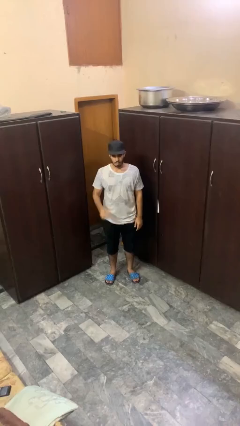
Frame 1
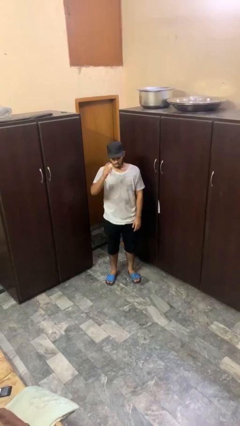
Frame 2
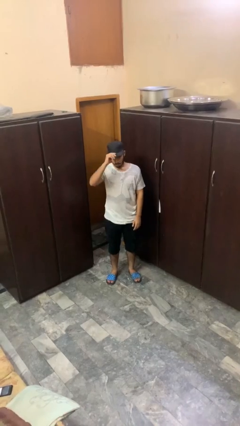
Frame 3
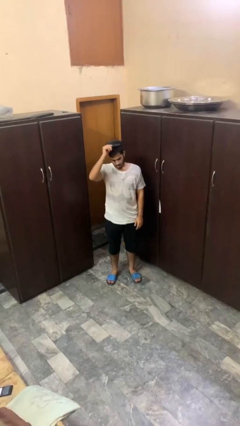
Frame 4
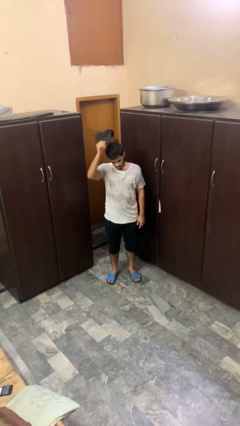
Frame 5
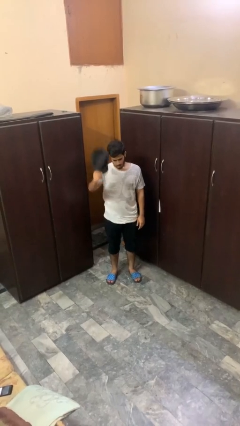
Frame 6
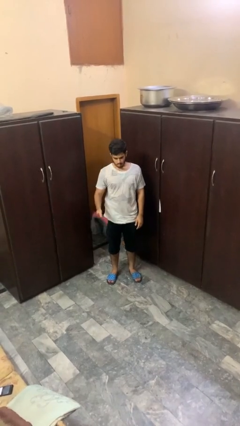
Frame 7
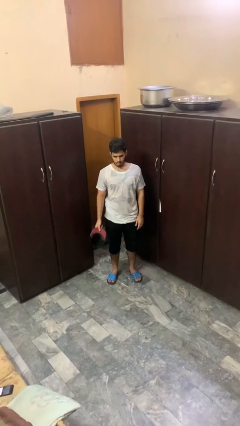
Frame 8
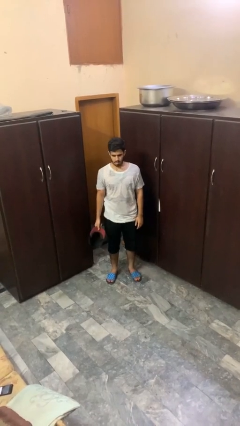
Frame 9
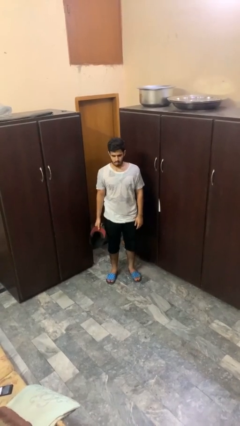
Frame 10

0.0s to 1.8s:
person takes off hat

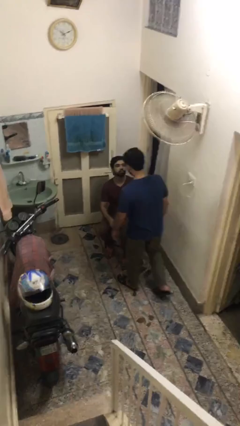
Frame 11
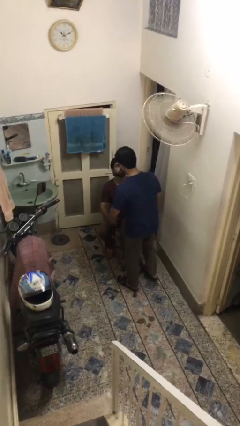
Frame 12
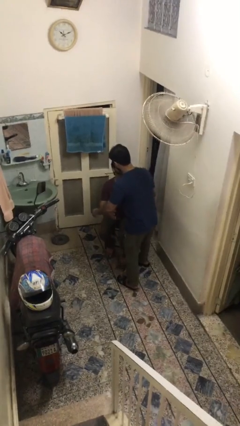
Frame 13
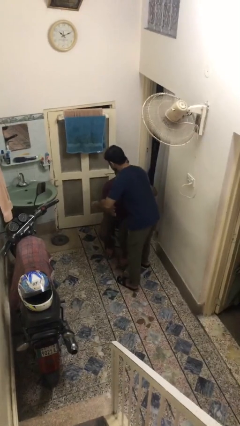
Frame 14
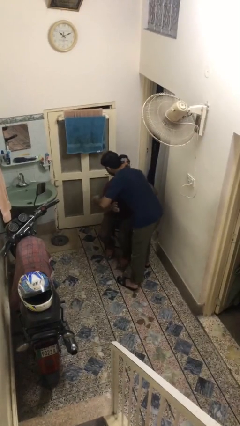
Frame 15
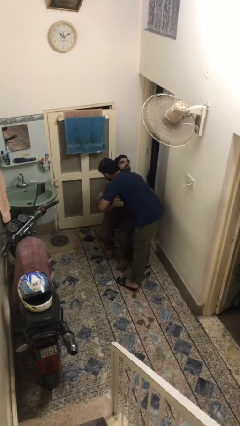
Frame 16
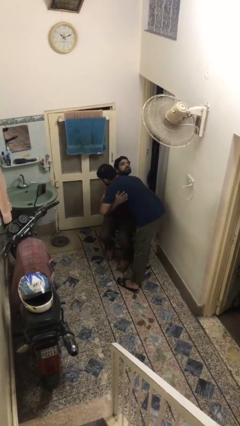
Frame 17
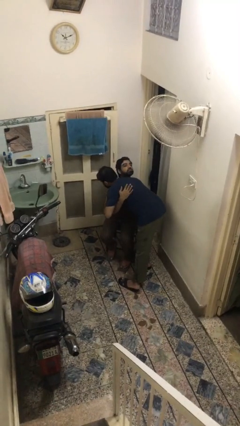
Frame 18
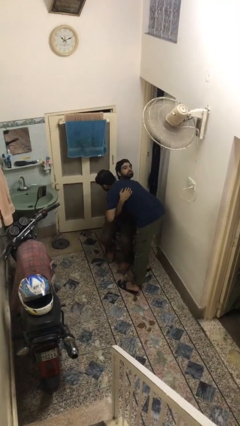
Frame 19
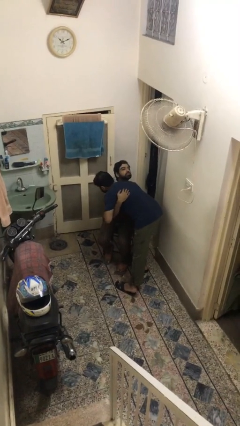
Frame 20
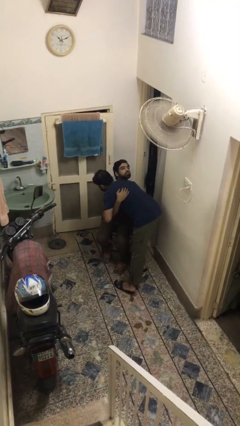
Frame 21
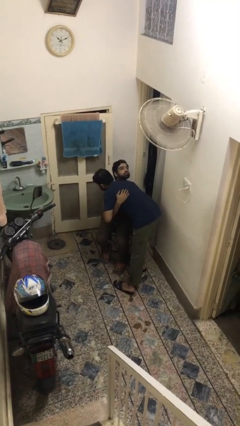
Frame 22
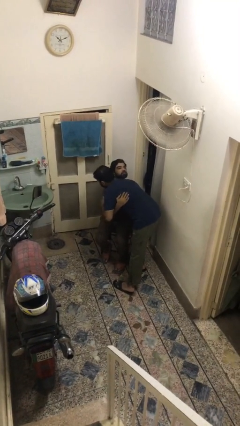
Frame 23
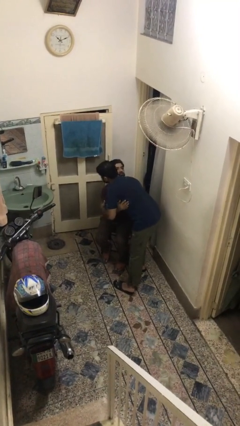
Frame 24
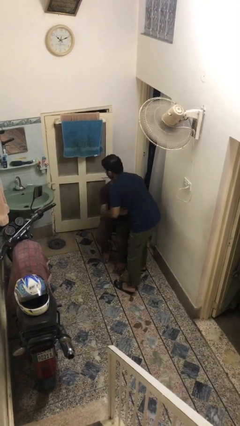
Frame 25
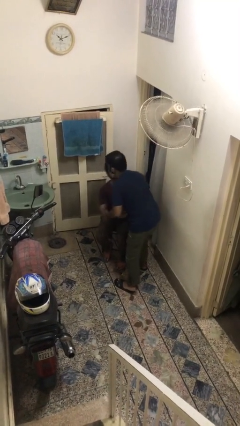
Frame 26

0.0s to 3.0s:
person embraces person

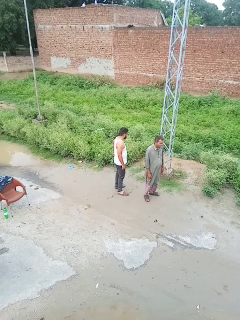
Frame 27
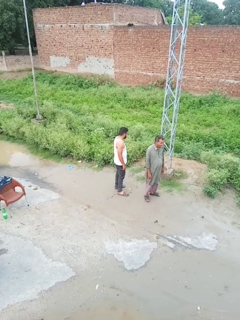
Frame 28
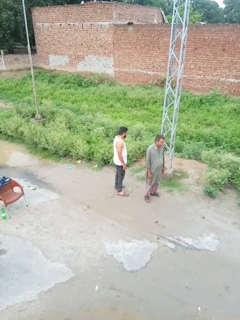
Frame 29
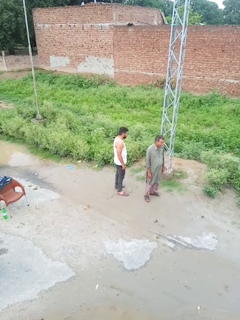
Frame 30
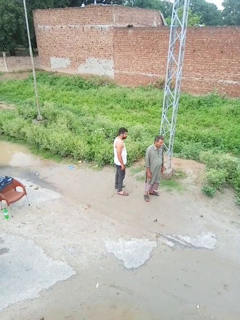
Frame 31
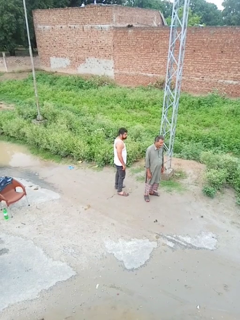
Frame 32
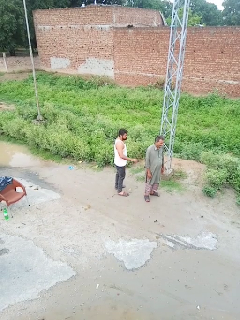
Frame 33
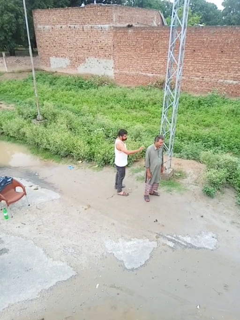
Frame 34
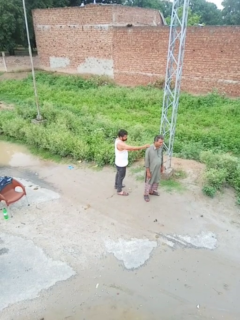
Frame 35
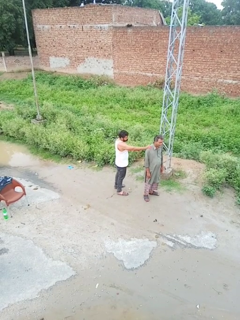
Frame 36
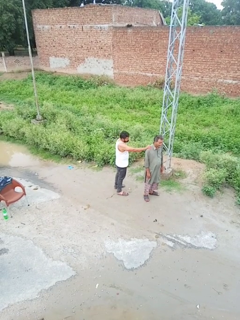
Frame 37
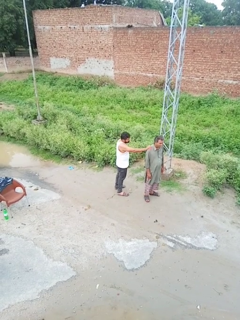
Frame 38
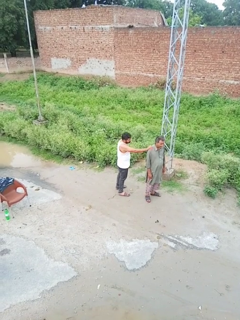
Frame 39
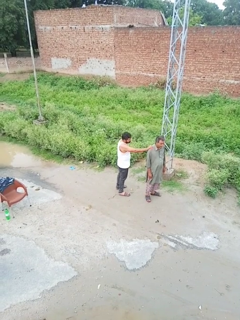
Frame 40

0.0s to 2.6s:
person grabs person by shoulder

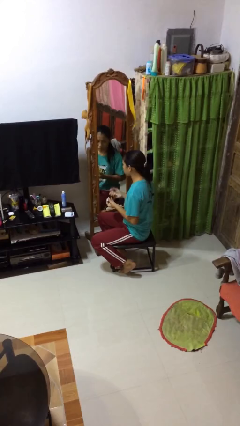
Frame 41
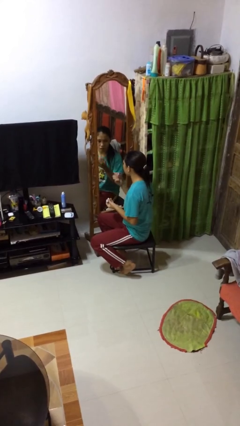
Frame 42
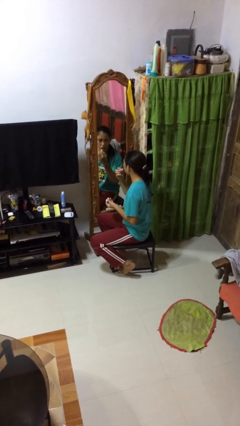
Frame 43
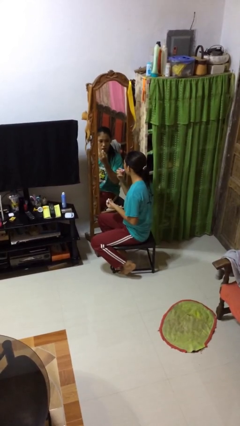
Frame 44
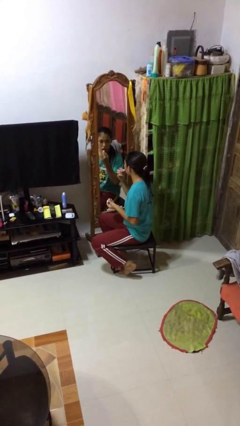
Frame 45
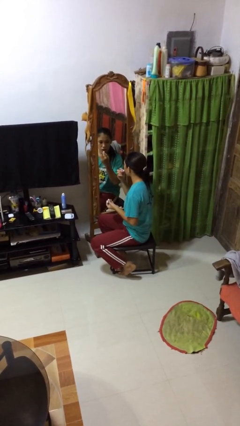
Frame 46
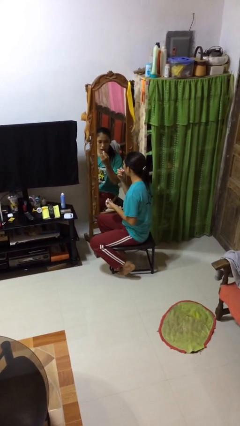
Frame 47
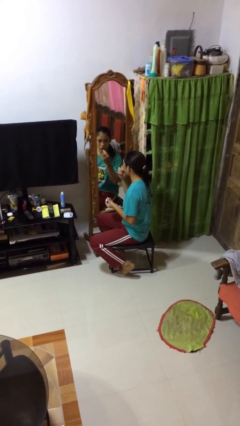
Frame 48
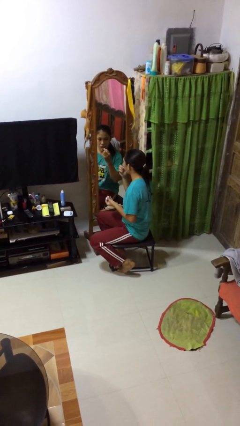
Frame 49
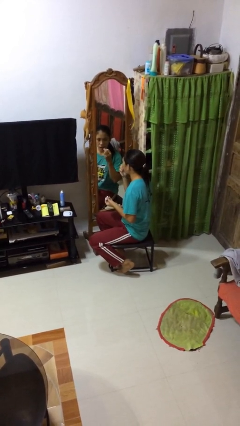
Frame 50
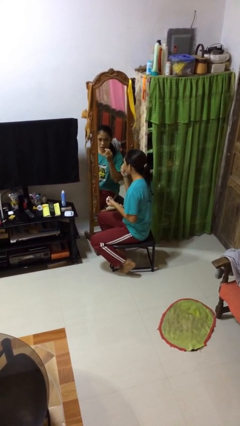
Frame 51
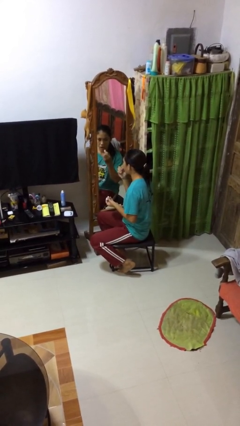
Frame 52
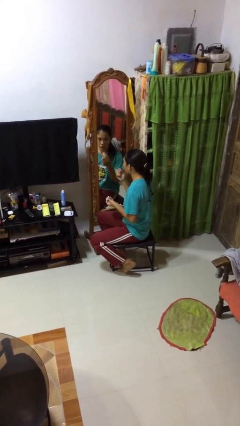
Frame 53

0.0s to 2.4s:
person applies lip makeup

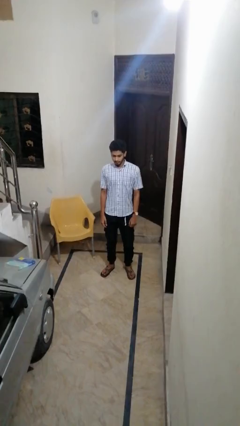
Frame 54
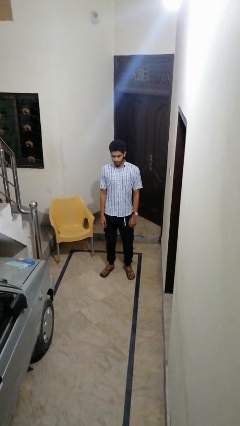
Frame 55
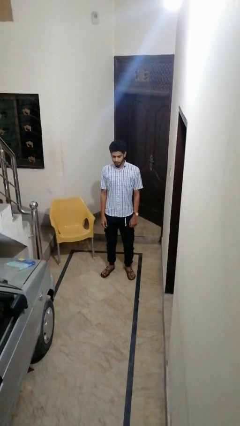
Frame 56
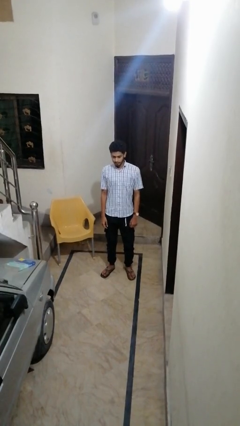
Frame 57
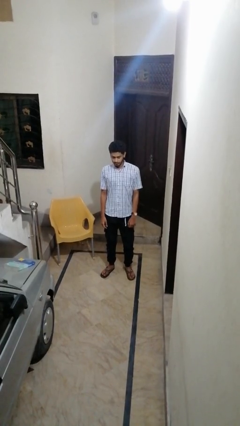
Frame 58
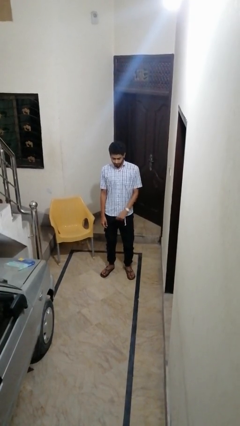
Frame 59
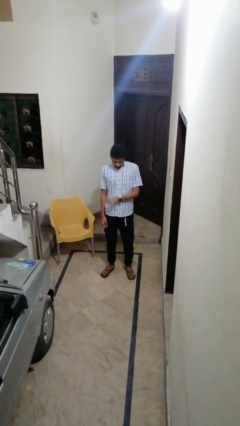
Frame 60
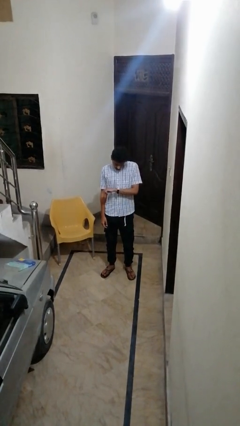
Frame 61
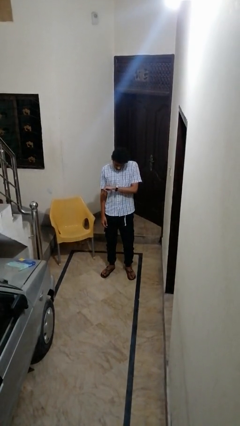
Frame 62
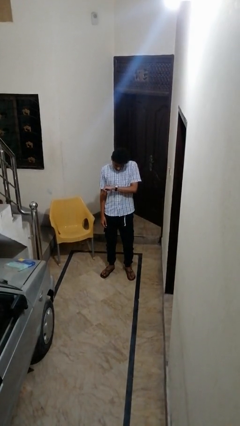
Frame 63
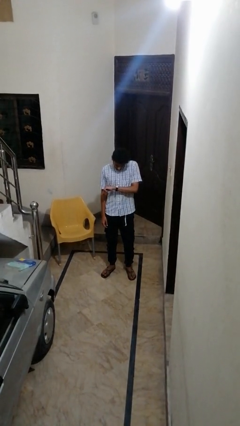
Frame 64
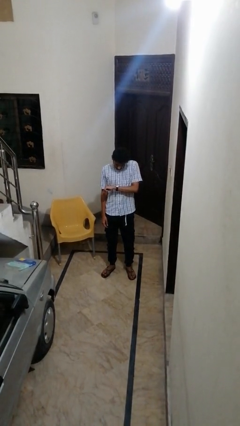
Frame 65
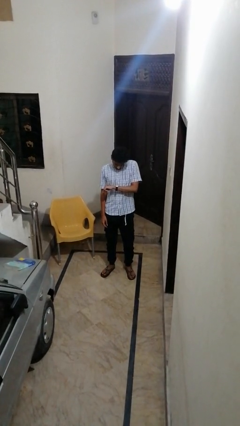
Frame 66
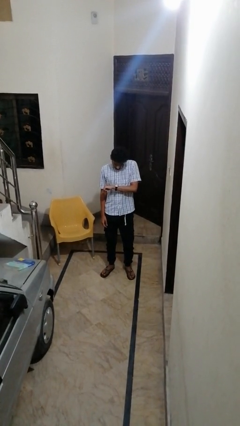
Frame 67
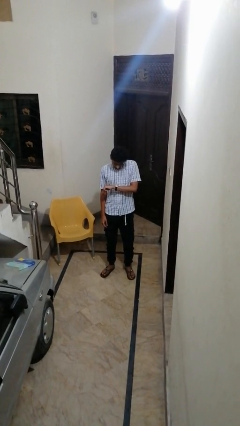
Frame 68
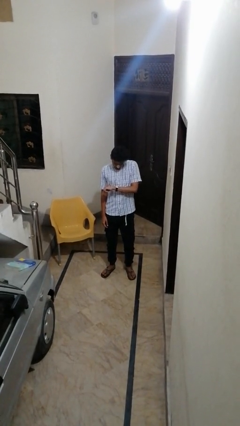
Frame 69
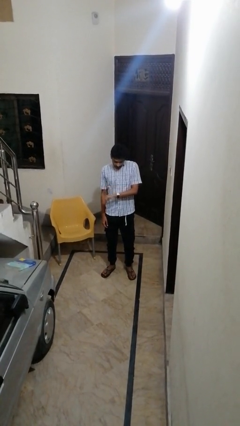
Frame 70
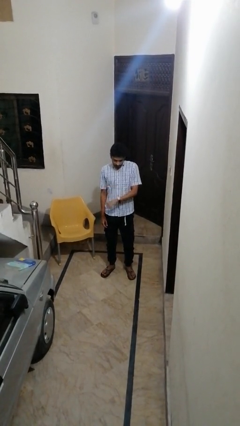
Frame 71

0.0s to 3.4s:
person looks at wristwatch

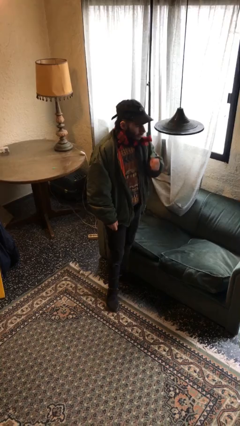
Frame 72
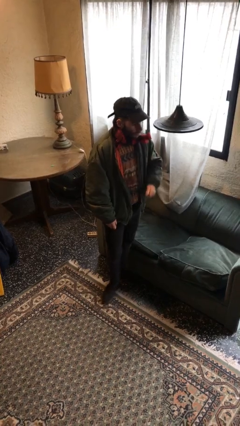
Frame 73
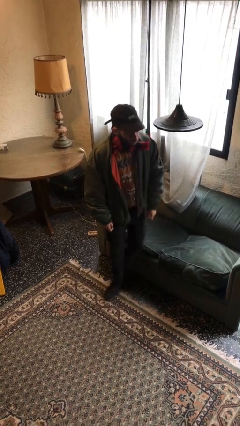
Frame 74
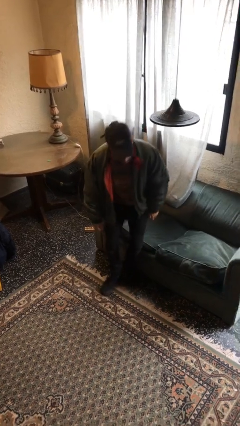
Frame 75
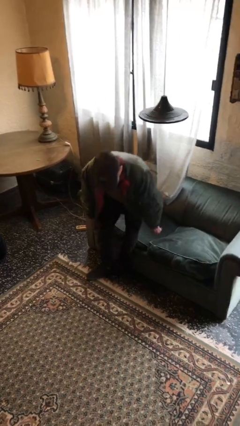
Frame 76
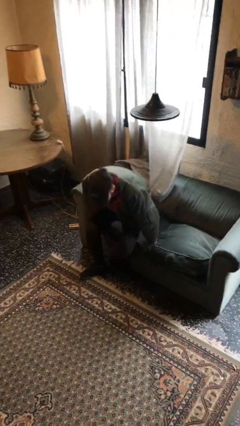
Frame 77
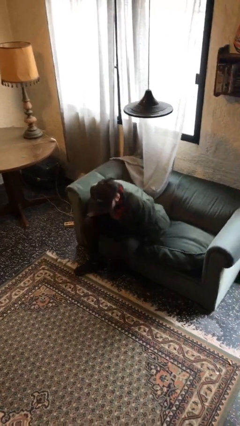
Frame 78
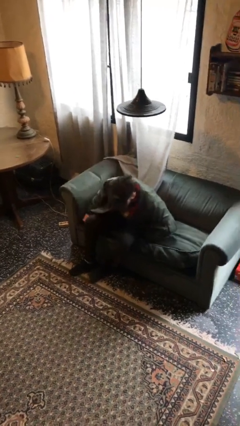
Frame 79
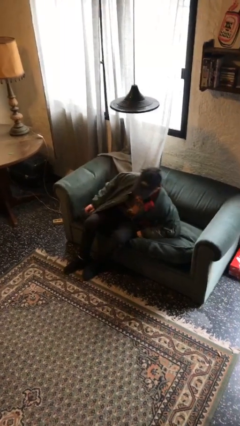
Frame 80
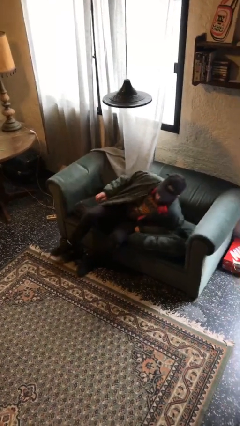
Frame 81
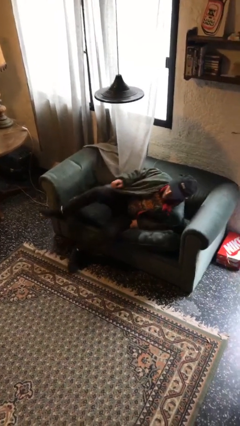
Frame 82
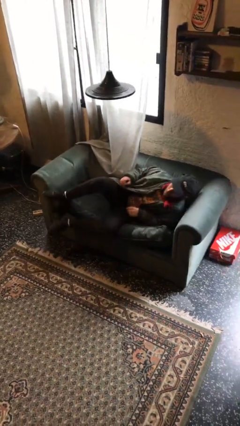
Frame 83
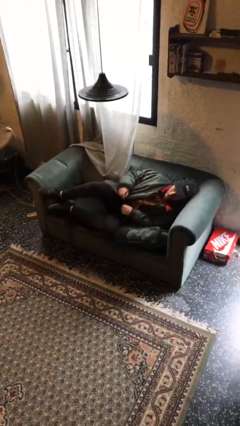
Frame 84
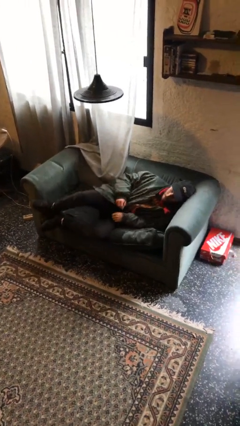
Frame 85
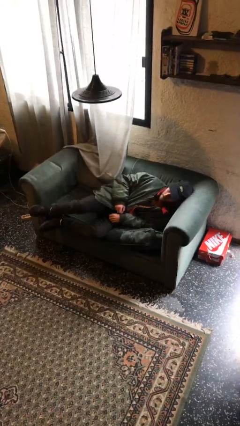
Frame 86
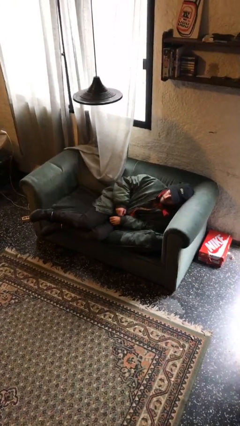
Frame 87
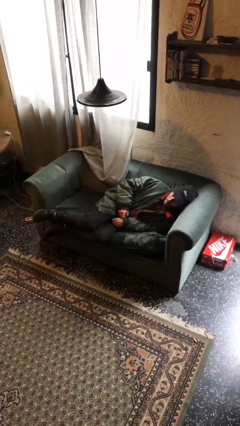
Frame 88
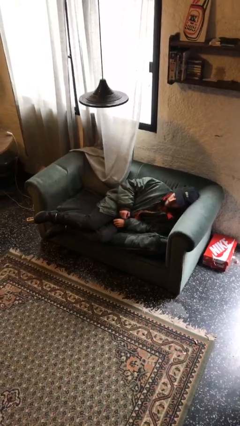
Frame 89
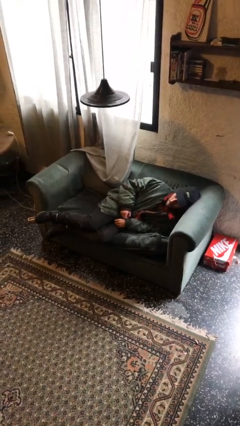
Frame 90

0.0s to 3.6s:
person lies down on couch

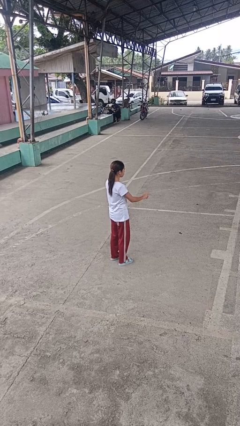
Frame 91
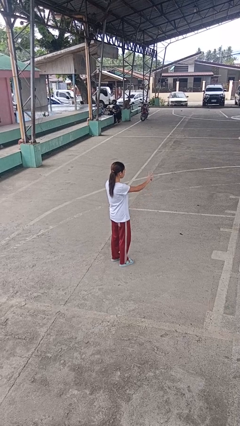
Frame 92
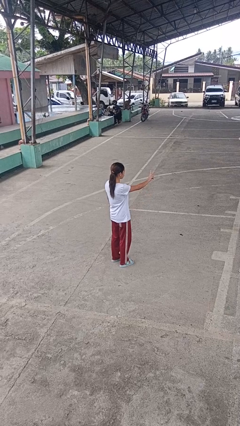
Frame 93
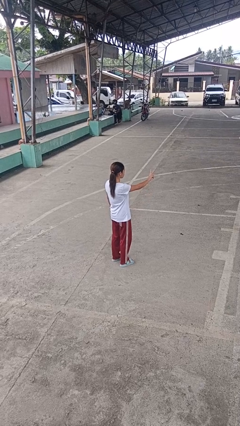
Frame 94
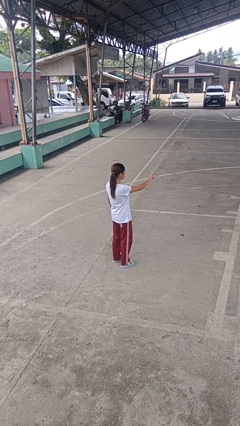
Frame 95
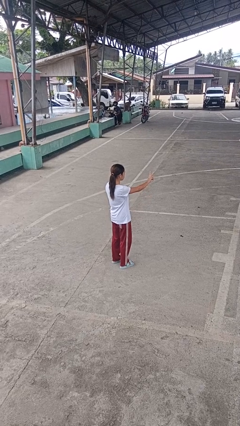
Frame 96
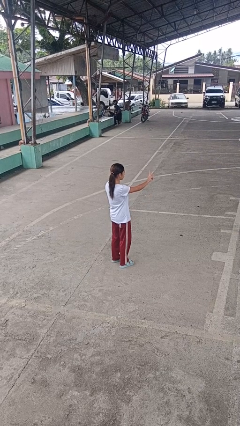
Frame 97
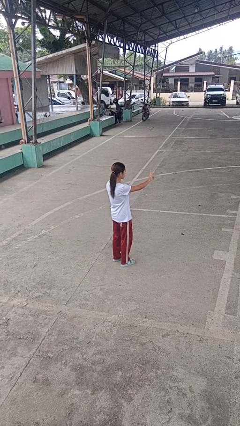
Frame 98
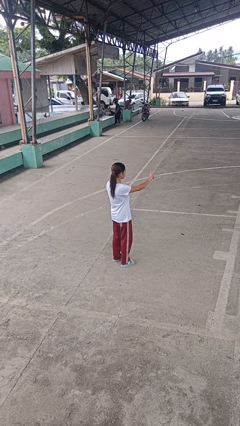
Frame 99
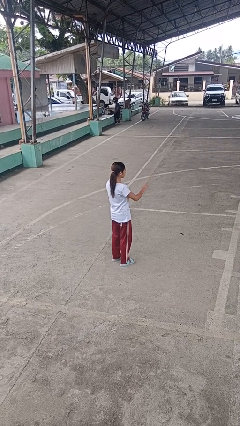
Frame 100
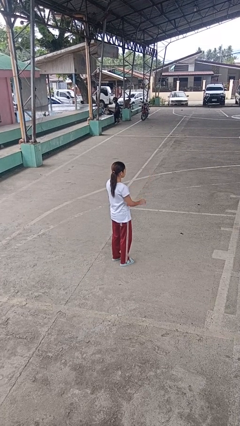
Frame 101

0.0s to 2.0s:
person gestures peace
